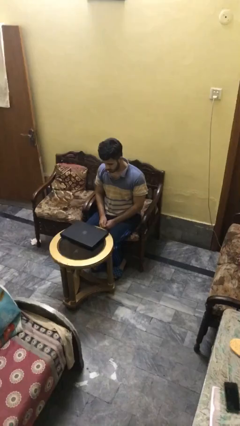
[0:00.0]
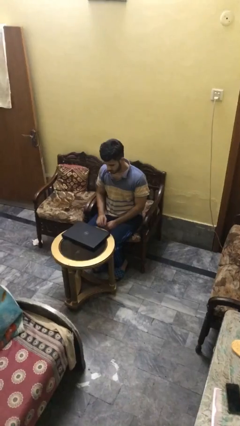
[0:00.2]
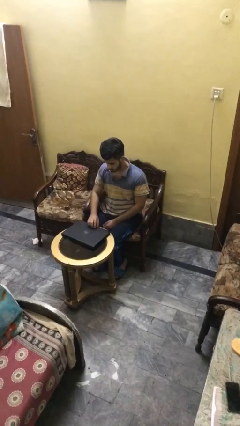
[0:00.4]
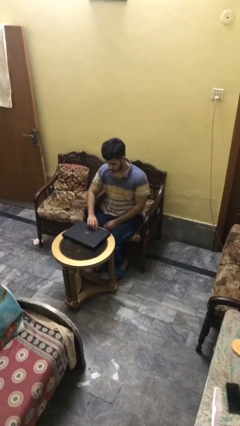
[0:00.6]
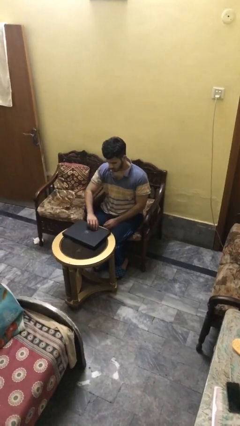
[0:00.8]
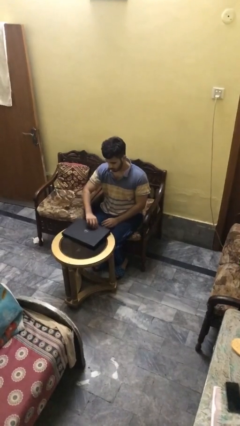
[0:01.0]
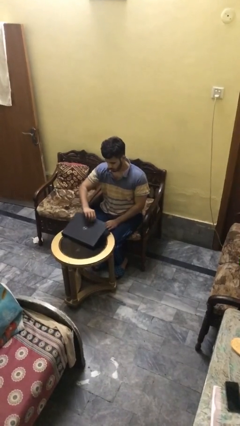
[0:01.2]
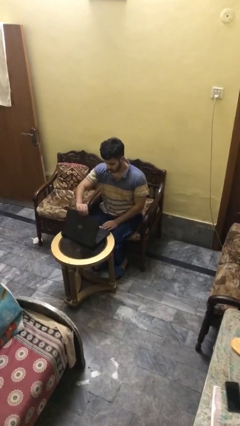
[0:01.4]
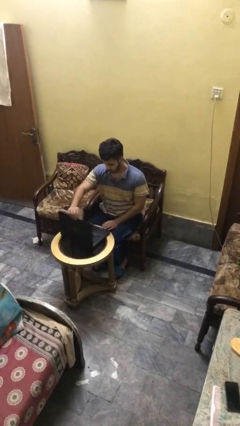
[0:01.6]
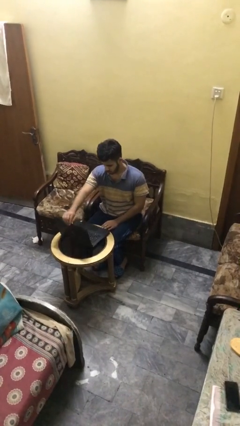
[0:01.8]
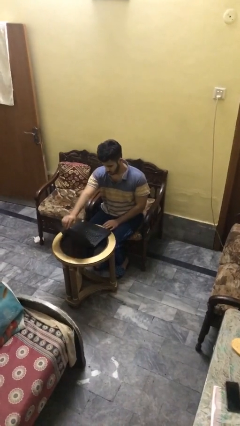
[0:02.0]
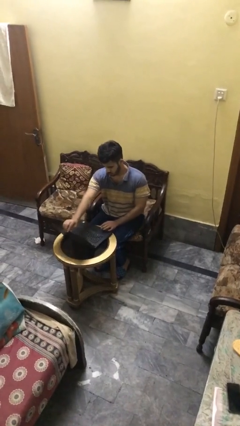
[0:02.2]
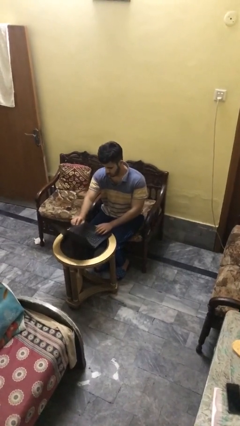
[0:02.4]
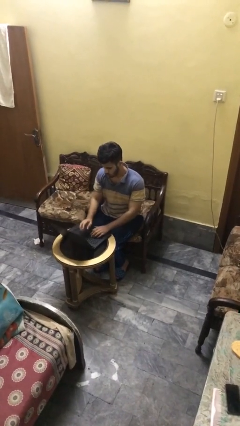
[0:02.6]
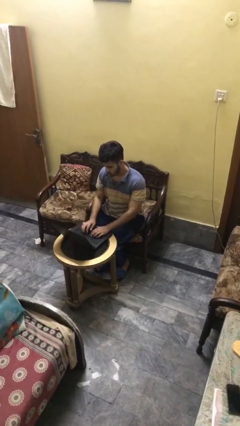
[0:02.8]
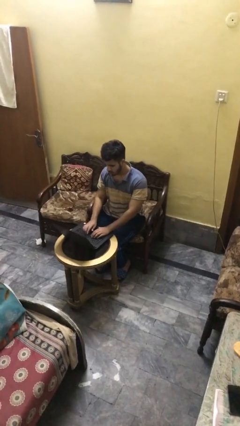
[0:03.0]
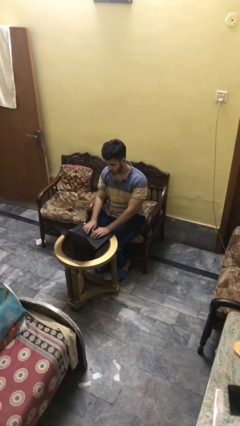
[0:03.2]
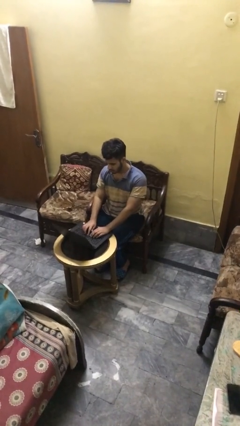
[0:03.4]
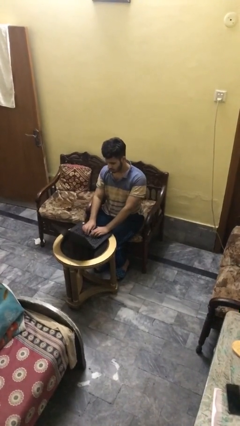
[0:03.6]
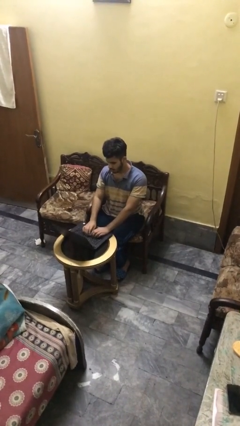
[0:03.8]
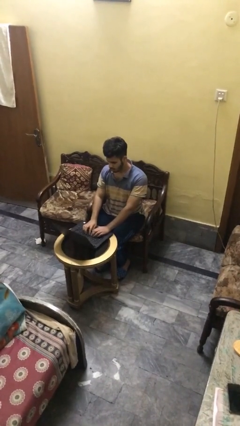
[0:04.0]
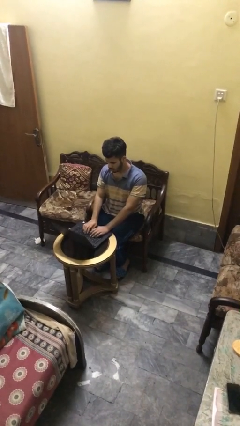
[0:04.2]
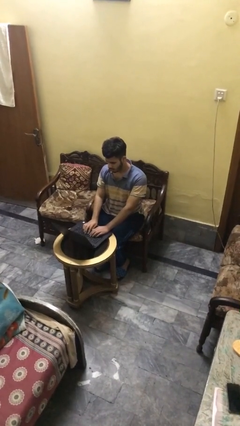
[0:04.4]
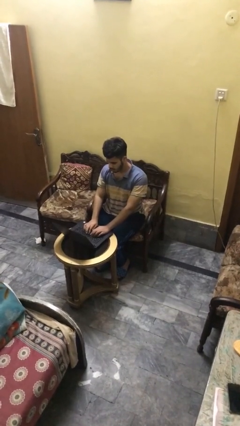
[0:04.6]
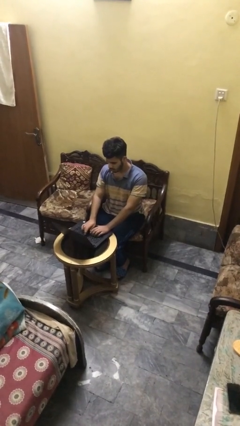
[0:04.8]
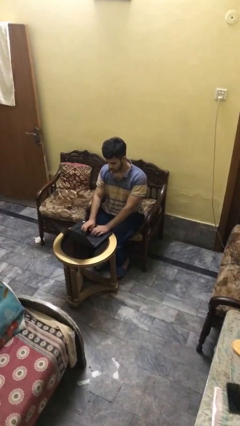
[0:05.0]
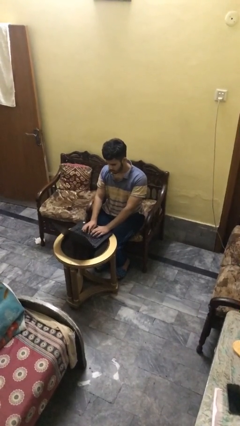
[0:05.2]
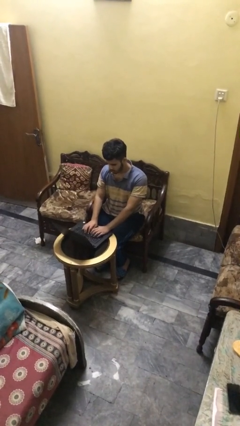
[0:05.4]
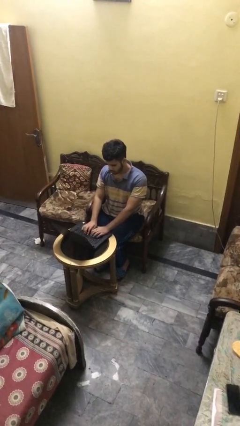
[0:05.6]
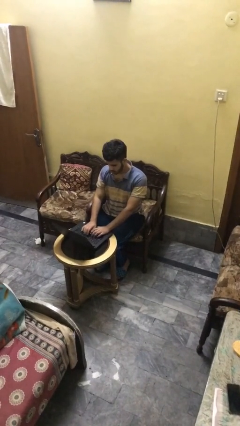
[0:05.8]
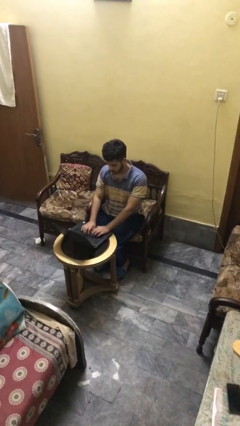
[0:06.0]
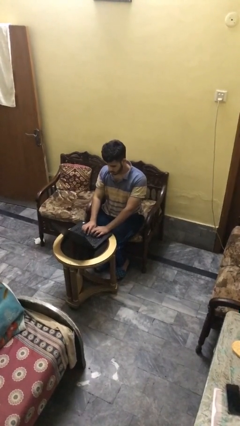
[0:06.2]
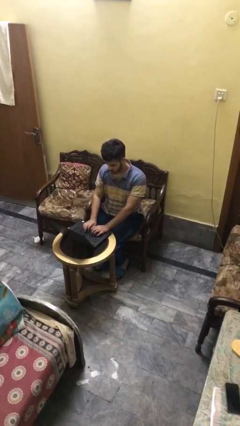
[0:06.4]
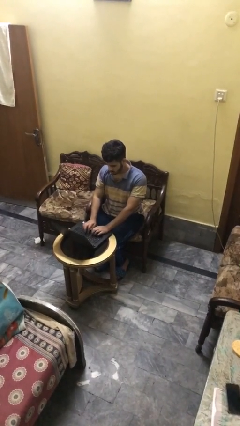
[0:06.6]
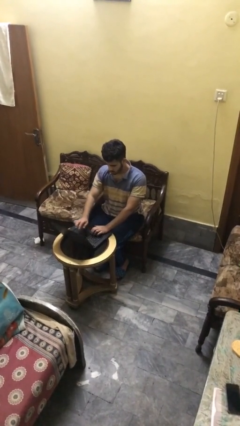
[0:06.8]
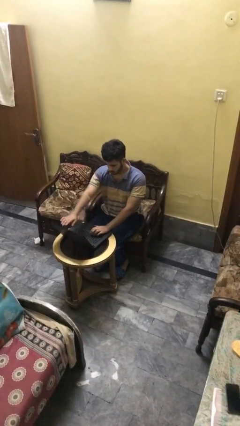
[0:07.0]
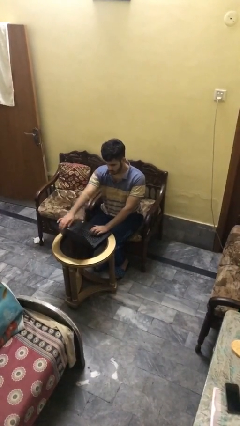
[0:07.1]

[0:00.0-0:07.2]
person interacts with laptop

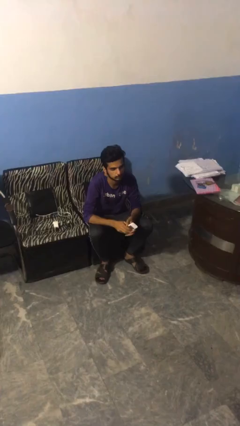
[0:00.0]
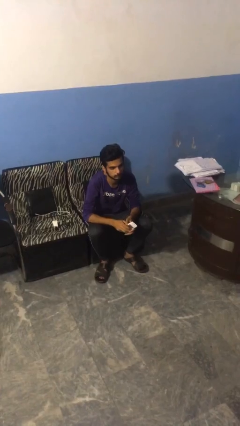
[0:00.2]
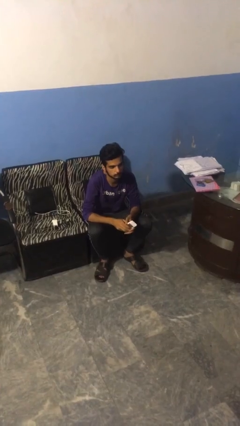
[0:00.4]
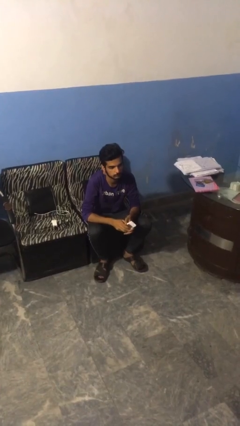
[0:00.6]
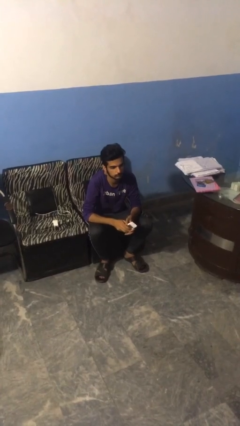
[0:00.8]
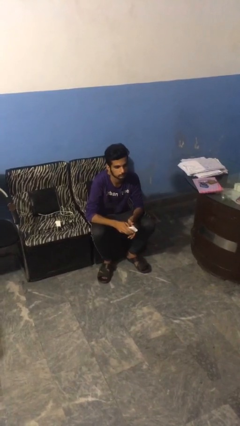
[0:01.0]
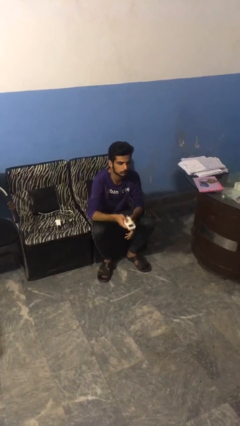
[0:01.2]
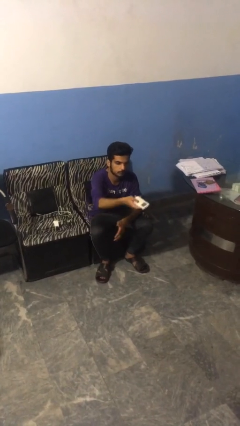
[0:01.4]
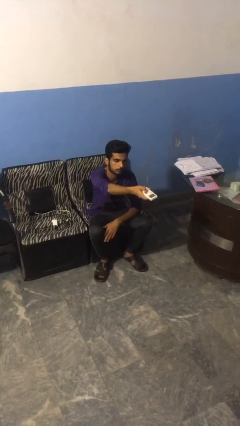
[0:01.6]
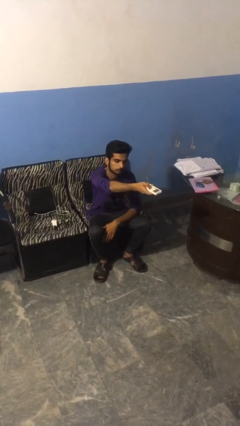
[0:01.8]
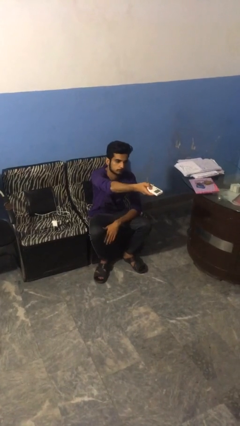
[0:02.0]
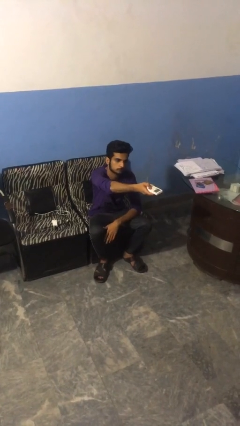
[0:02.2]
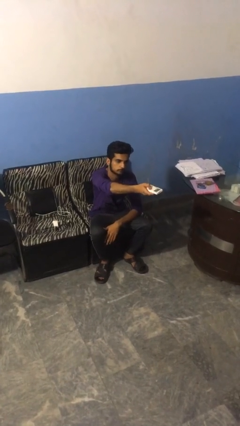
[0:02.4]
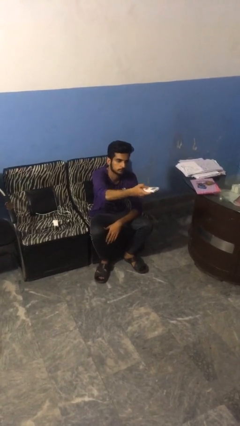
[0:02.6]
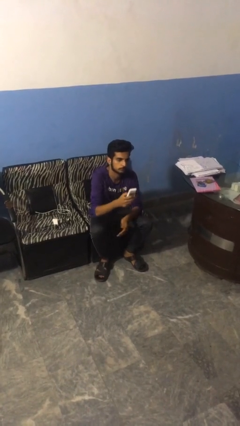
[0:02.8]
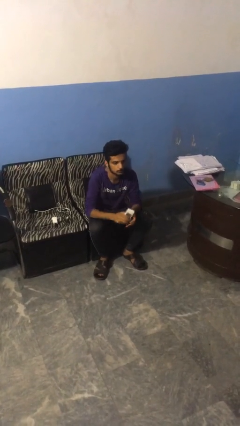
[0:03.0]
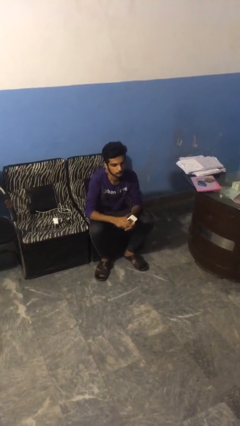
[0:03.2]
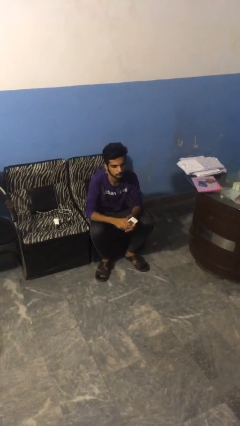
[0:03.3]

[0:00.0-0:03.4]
person uses television remote

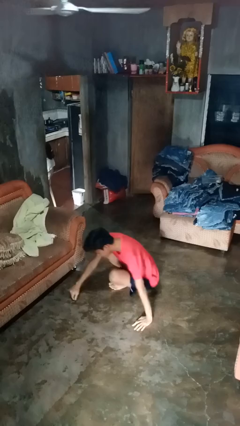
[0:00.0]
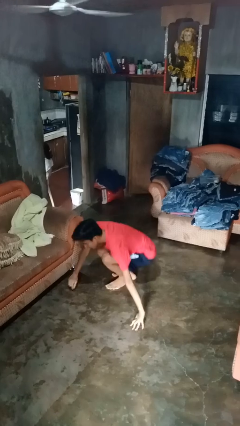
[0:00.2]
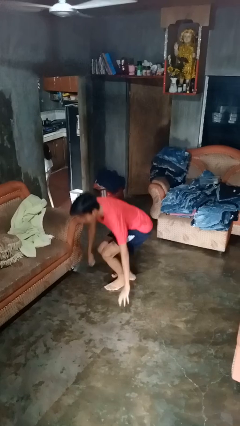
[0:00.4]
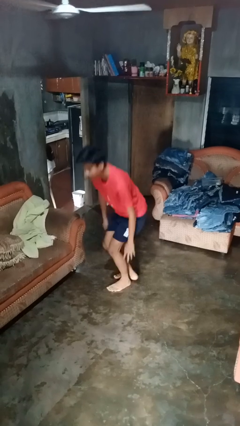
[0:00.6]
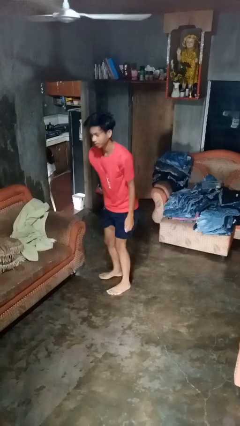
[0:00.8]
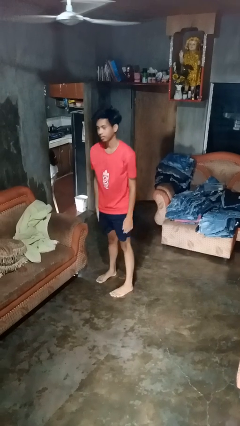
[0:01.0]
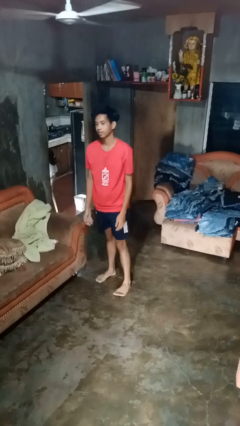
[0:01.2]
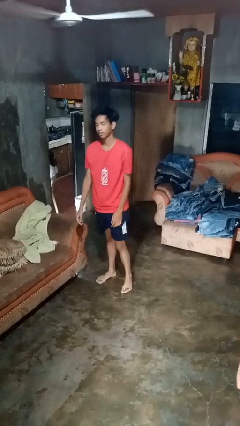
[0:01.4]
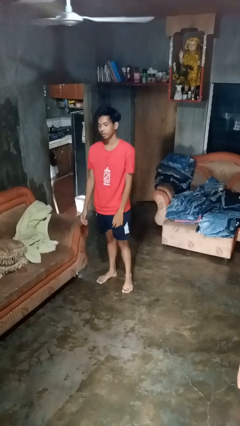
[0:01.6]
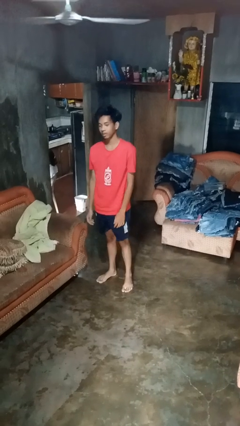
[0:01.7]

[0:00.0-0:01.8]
person stands up from floor

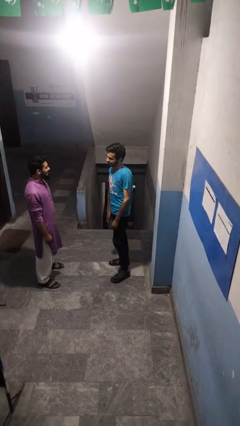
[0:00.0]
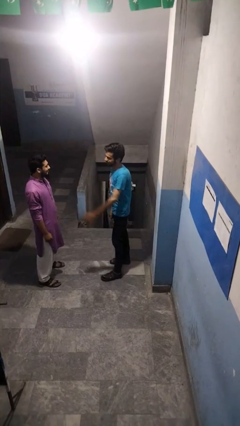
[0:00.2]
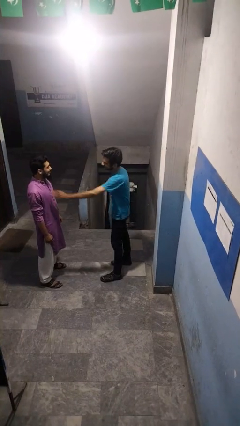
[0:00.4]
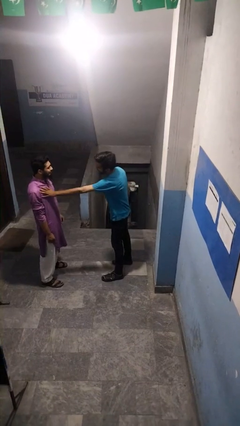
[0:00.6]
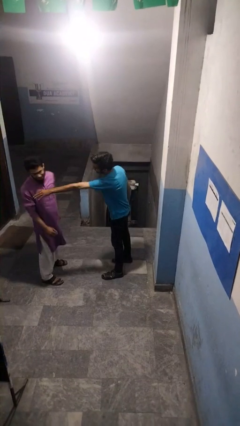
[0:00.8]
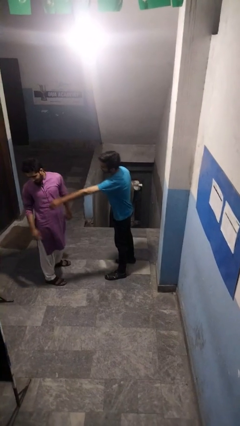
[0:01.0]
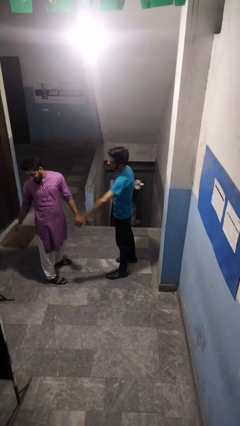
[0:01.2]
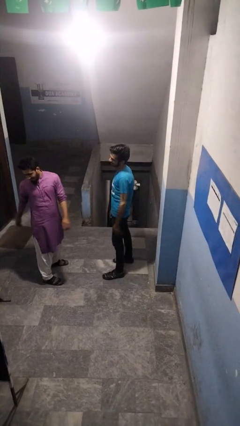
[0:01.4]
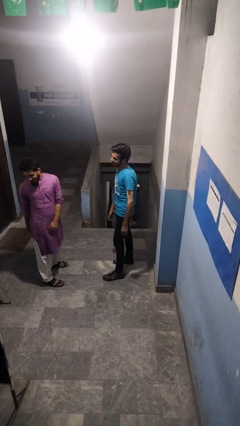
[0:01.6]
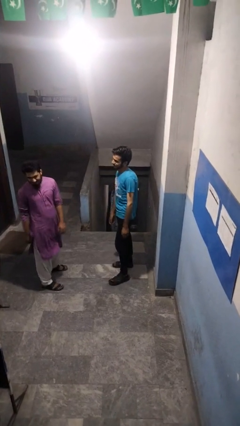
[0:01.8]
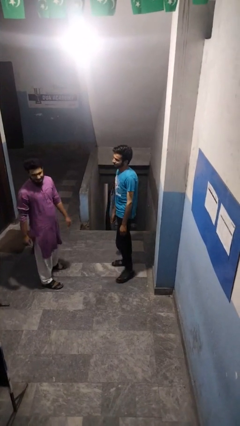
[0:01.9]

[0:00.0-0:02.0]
person shoves person

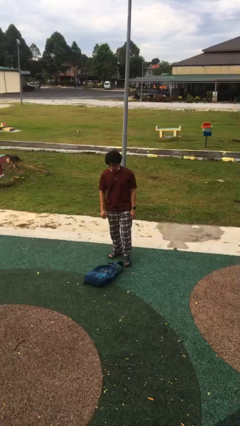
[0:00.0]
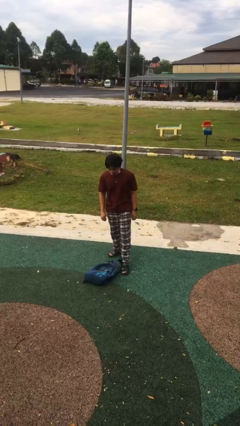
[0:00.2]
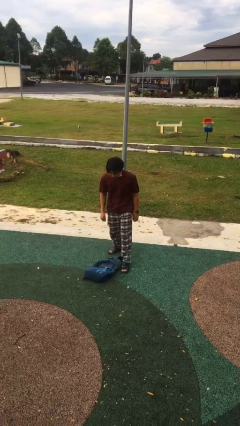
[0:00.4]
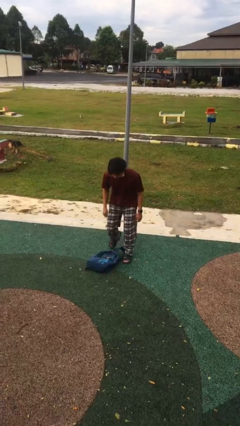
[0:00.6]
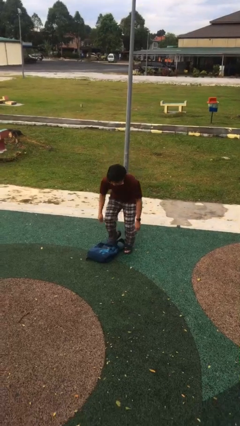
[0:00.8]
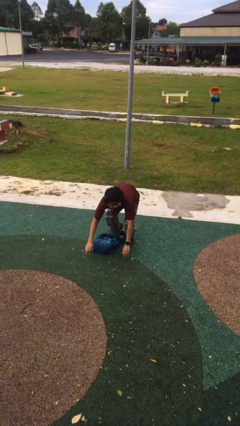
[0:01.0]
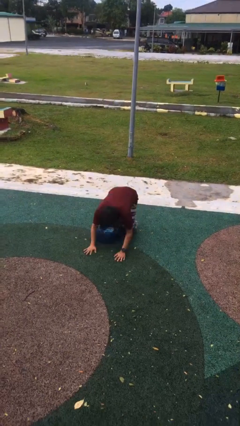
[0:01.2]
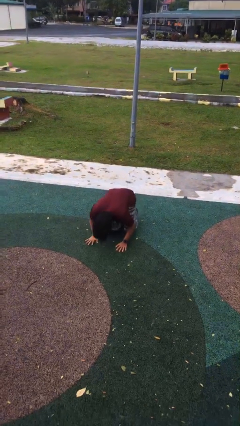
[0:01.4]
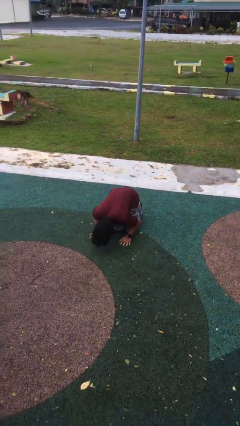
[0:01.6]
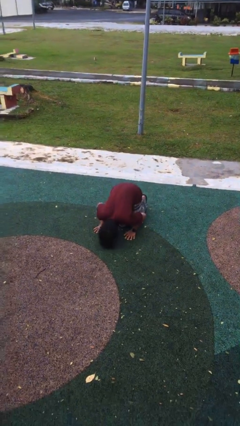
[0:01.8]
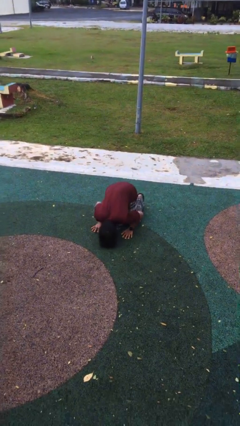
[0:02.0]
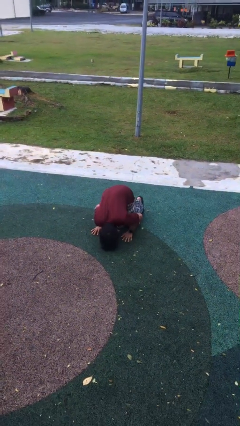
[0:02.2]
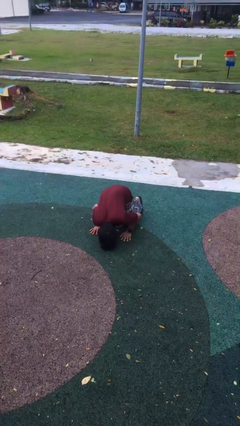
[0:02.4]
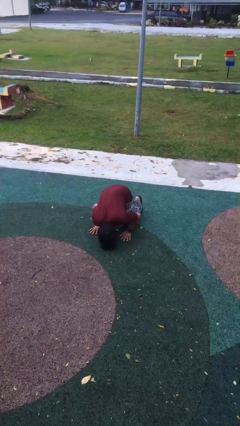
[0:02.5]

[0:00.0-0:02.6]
person trips on object on floor

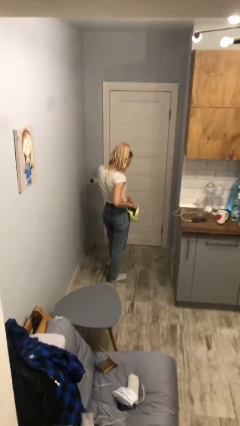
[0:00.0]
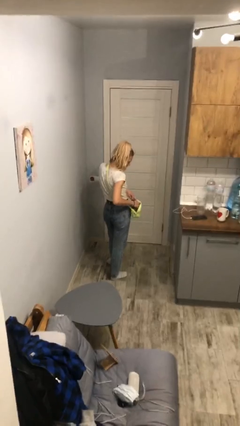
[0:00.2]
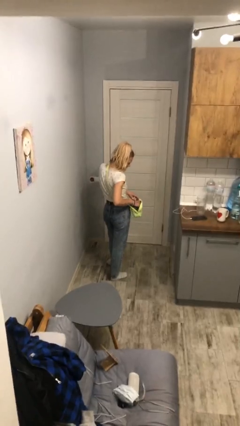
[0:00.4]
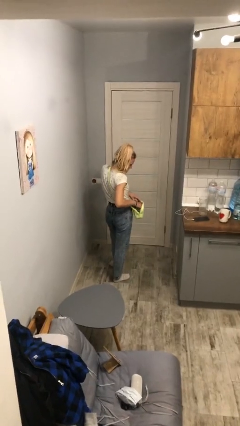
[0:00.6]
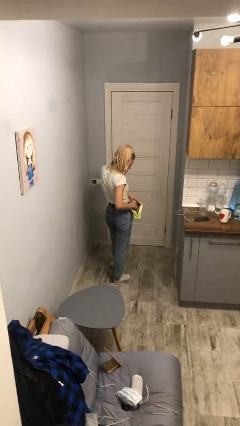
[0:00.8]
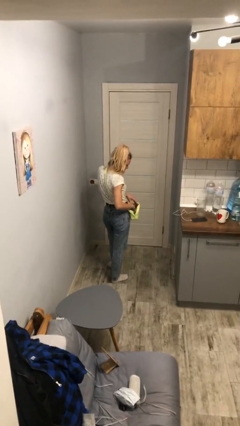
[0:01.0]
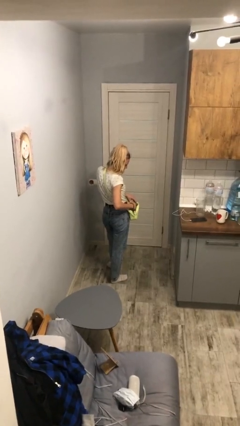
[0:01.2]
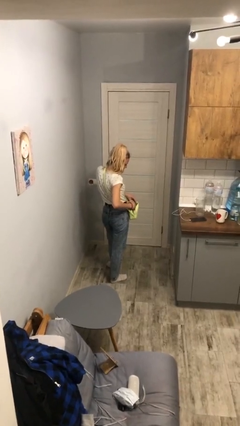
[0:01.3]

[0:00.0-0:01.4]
person searches in purse
